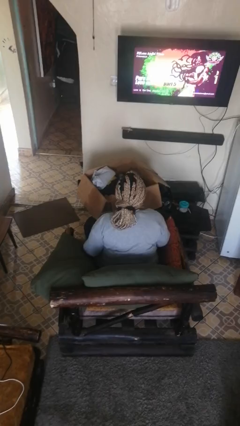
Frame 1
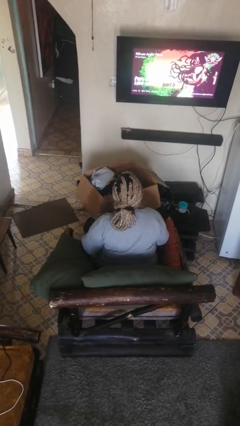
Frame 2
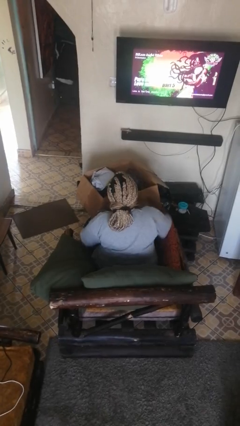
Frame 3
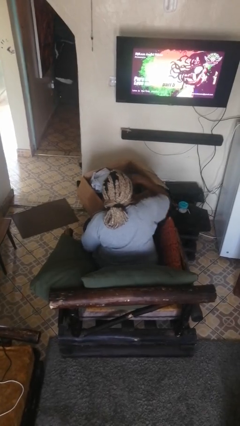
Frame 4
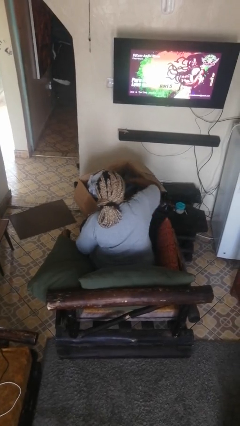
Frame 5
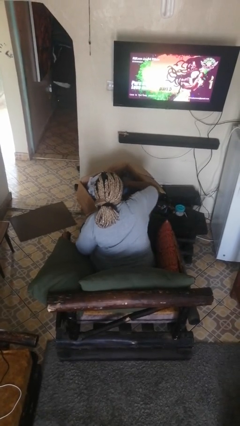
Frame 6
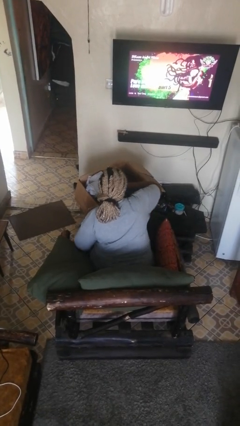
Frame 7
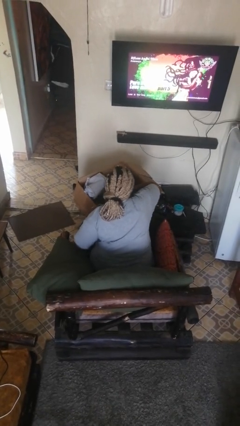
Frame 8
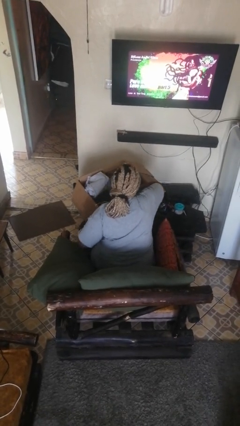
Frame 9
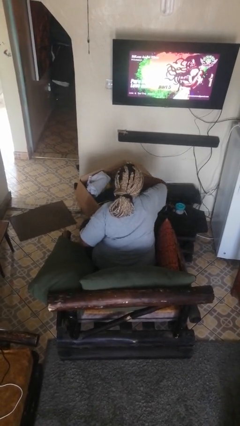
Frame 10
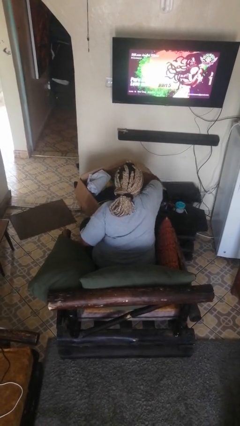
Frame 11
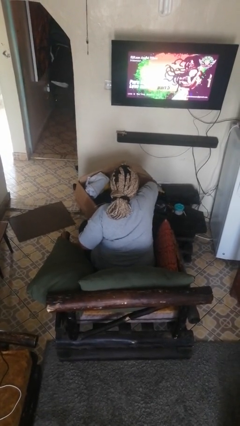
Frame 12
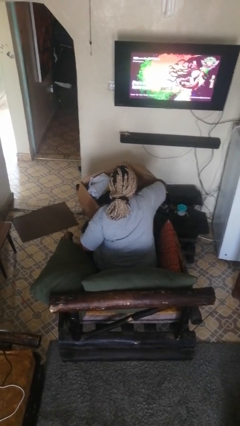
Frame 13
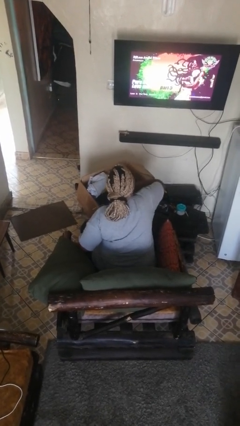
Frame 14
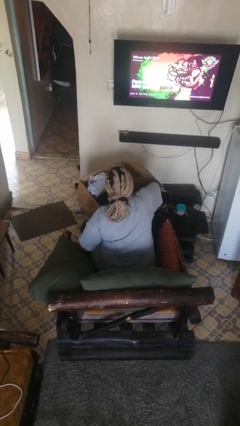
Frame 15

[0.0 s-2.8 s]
person searches in box

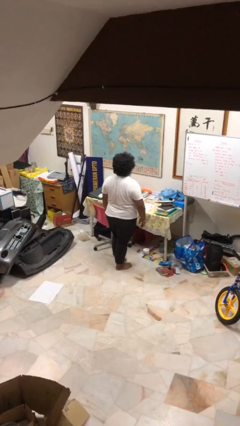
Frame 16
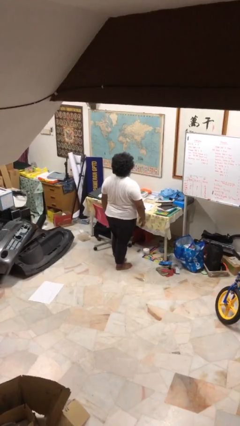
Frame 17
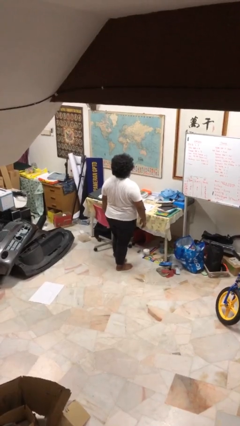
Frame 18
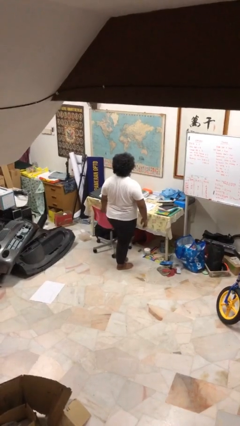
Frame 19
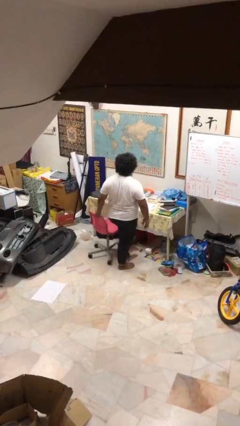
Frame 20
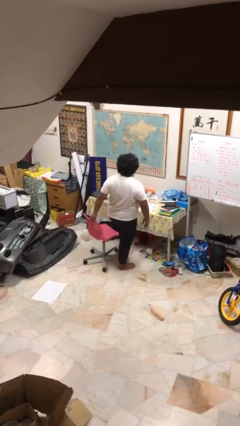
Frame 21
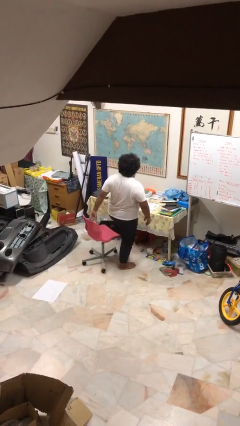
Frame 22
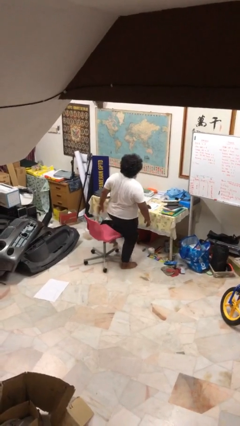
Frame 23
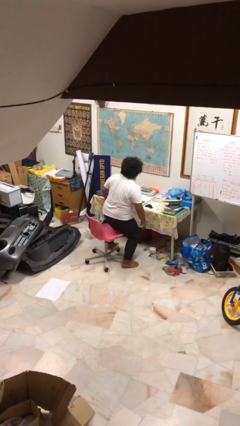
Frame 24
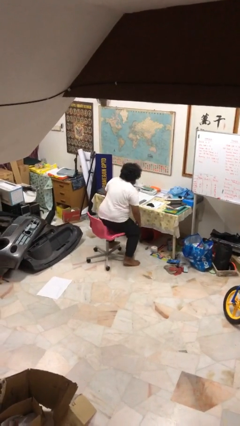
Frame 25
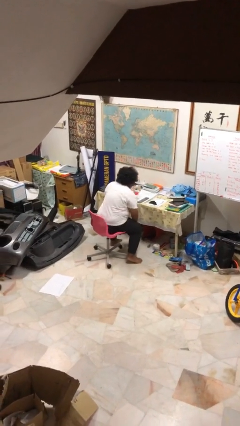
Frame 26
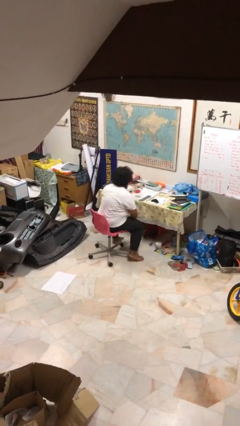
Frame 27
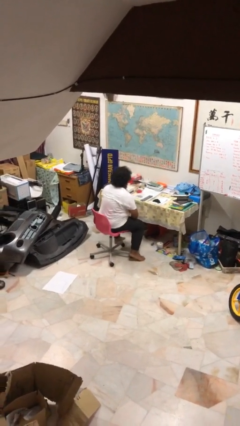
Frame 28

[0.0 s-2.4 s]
person sits down

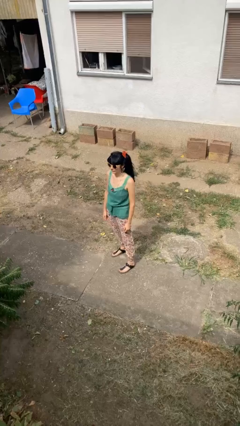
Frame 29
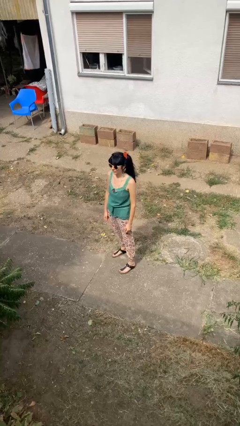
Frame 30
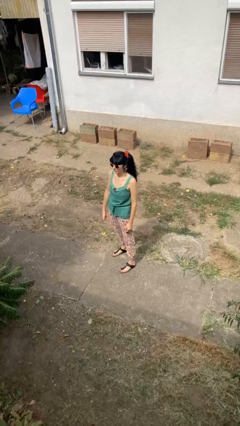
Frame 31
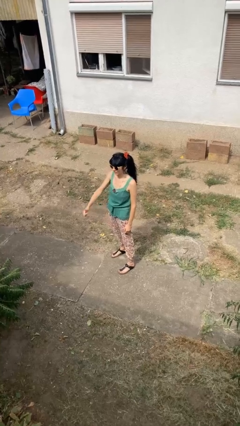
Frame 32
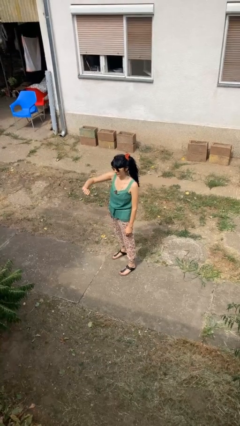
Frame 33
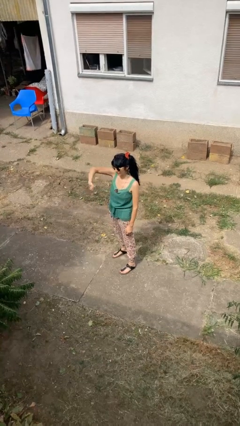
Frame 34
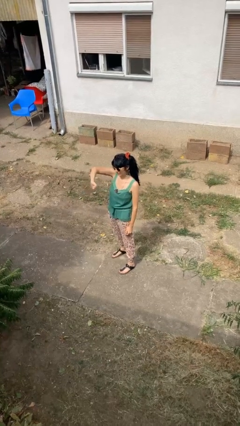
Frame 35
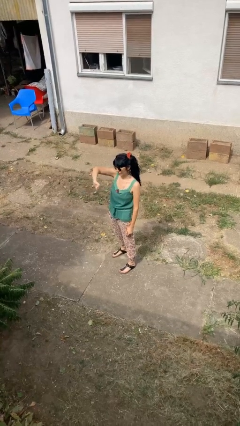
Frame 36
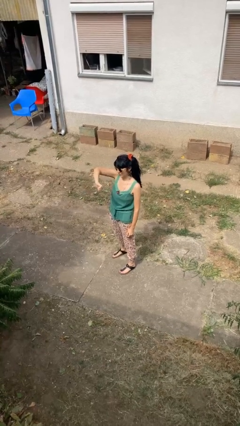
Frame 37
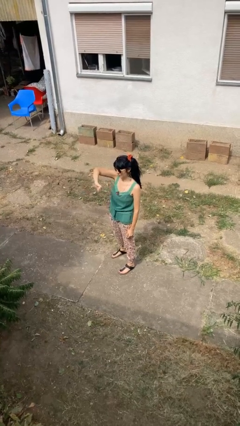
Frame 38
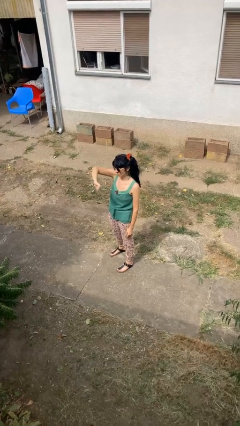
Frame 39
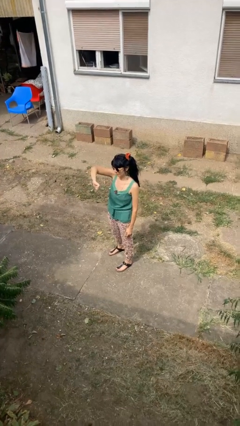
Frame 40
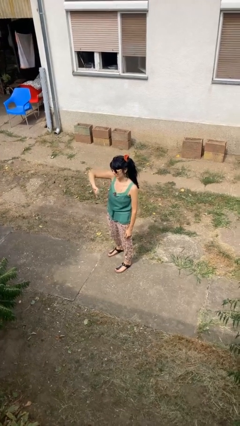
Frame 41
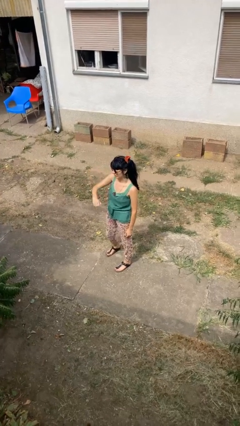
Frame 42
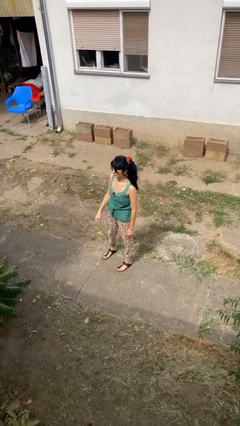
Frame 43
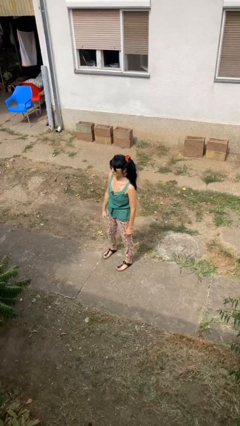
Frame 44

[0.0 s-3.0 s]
person gestures thumbs down

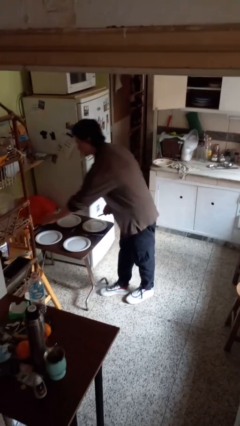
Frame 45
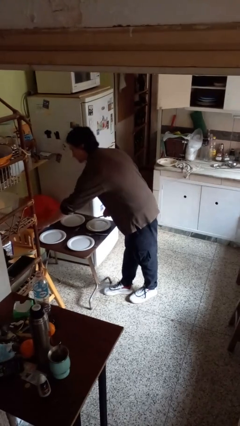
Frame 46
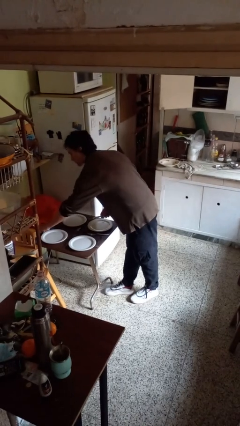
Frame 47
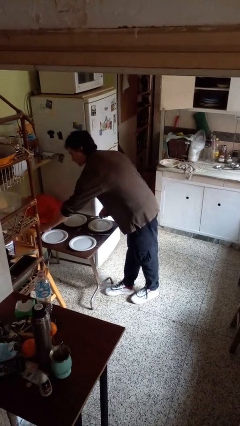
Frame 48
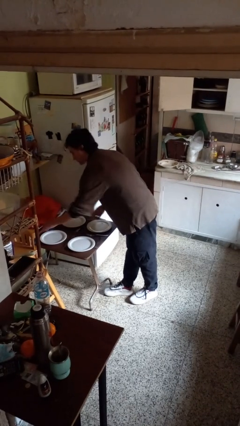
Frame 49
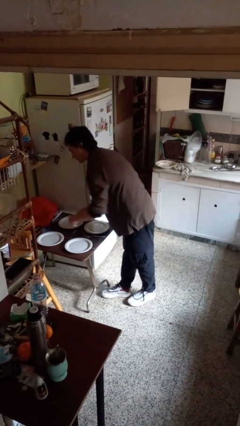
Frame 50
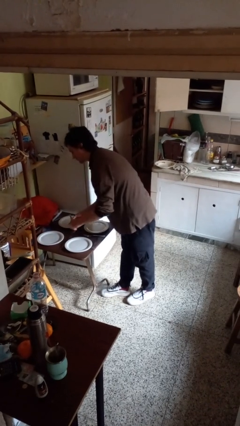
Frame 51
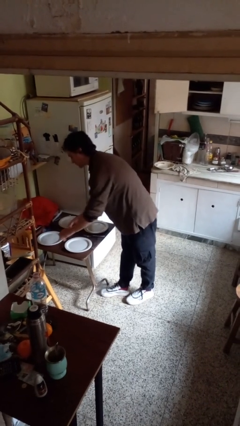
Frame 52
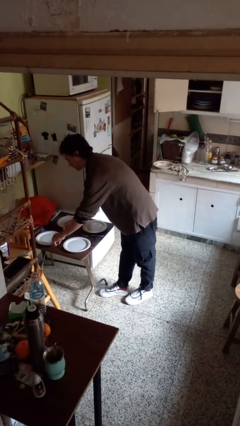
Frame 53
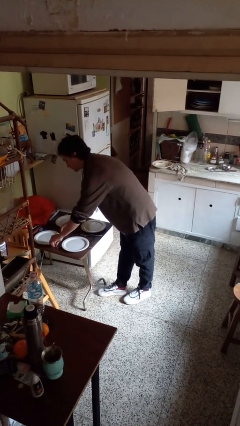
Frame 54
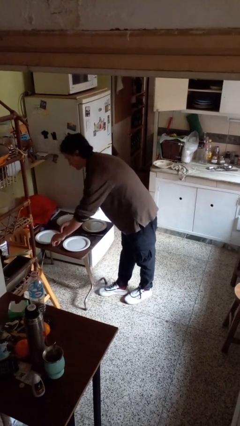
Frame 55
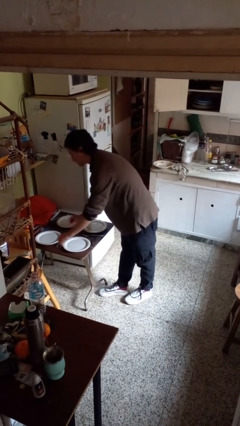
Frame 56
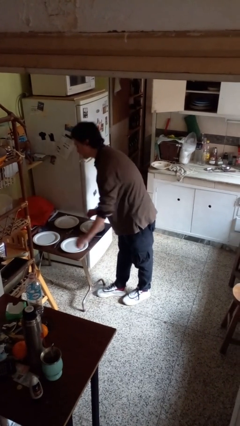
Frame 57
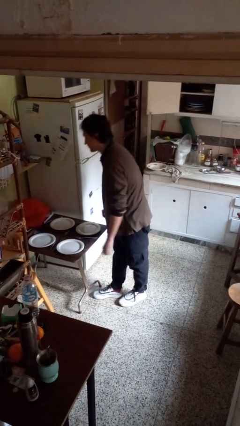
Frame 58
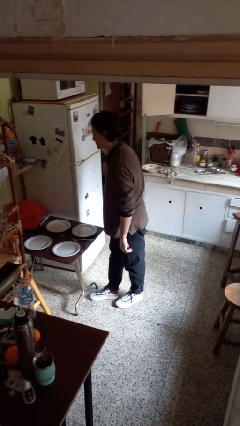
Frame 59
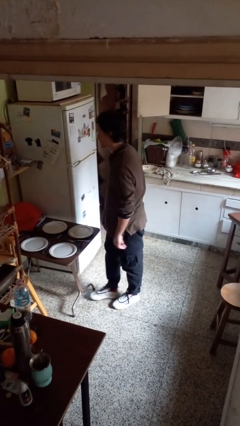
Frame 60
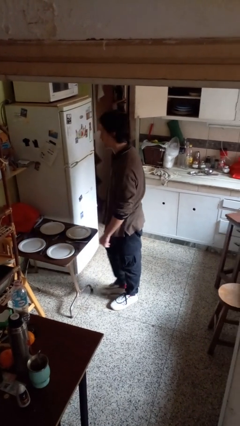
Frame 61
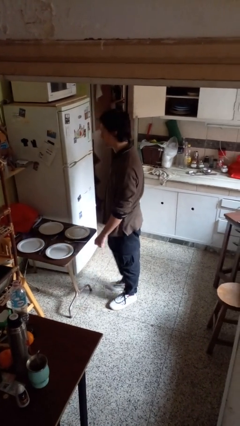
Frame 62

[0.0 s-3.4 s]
person sets table

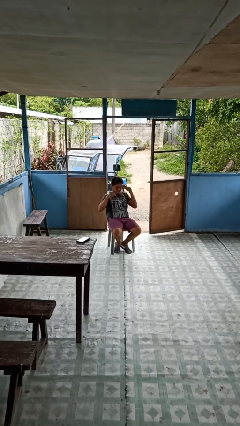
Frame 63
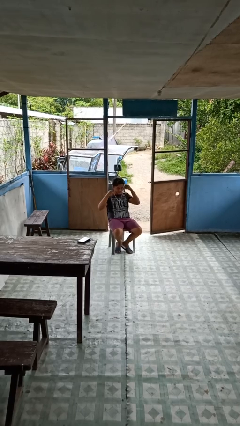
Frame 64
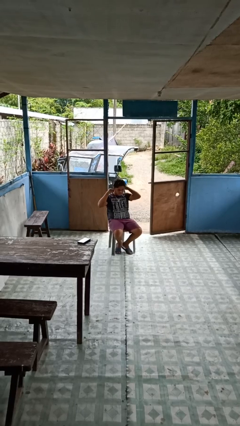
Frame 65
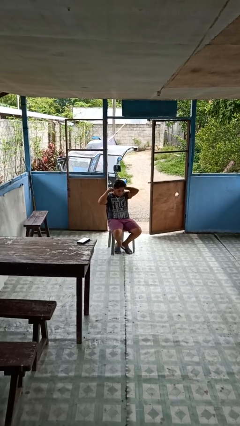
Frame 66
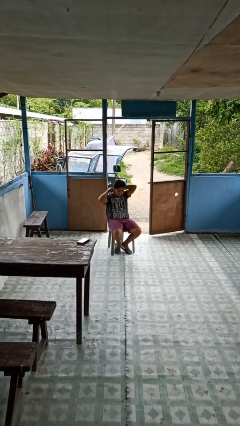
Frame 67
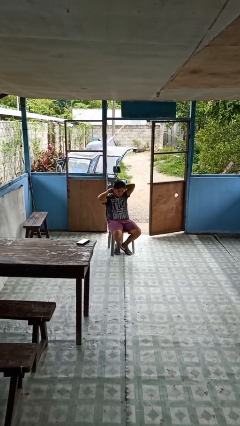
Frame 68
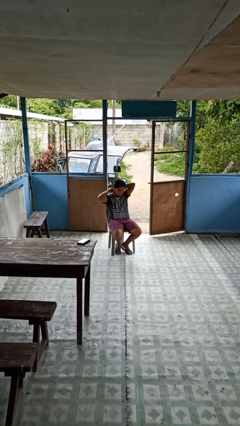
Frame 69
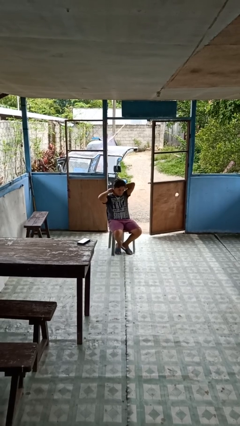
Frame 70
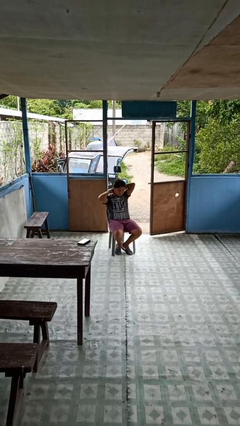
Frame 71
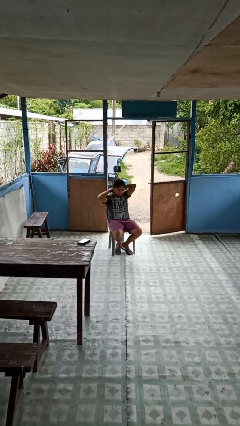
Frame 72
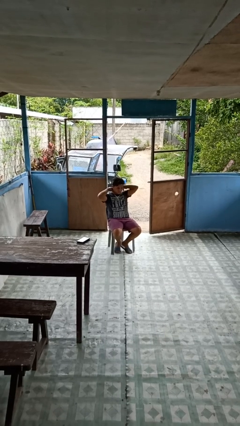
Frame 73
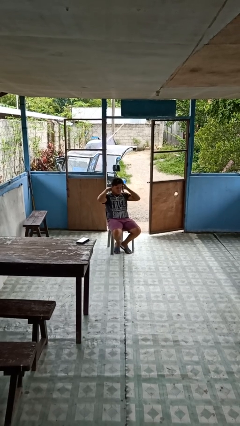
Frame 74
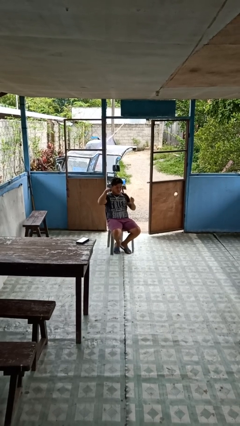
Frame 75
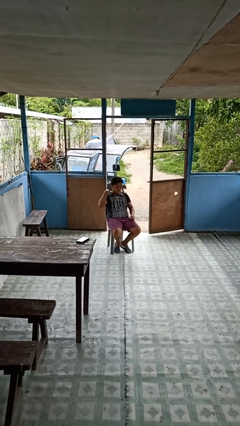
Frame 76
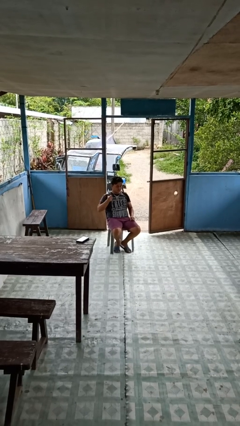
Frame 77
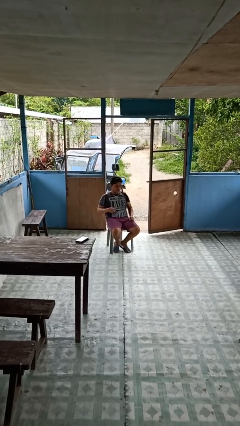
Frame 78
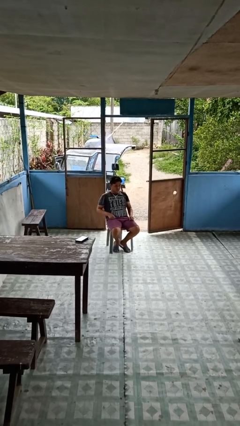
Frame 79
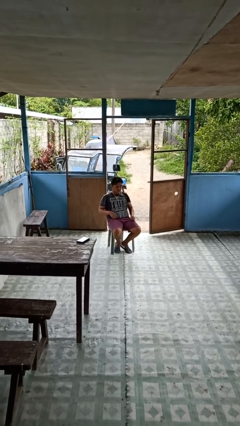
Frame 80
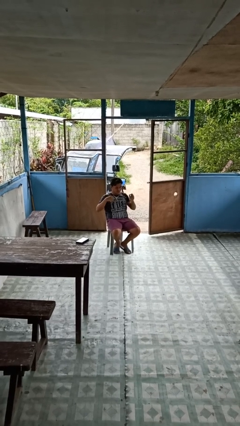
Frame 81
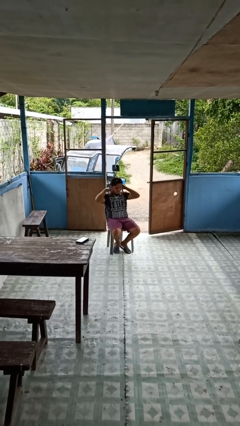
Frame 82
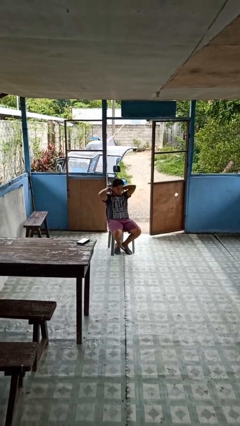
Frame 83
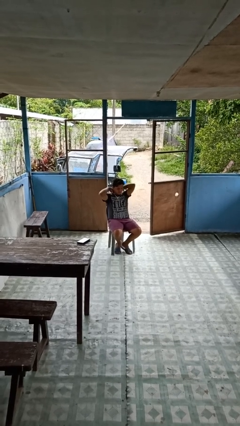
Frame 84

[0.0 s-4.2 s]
person puts on necklace

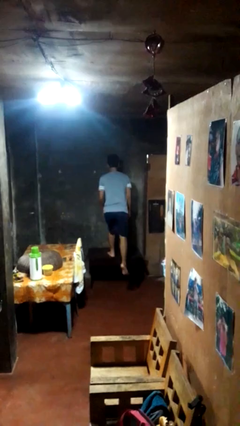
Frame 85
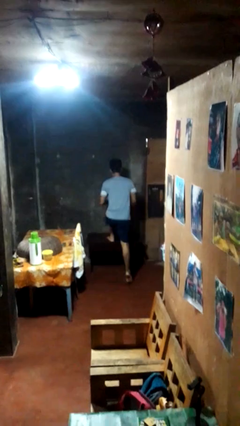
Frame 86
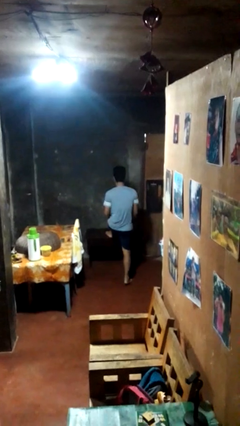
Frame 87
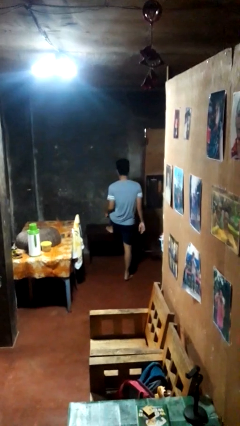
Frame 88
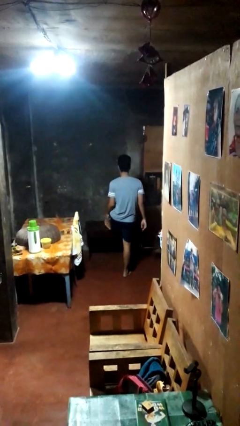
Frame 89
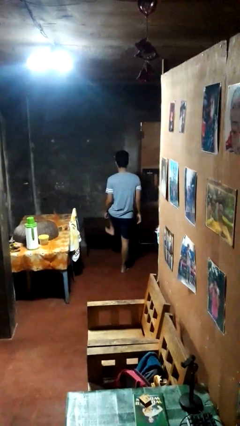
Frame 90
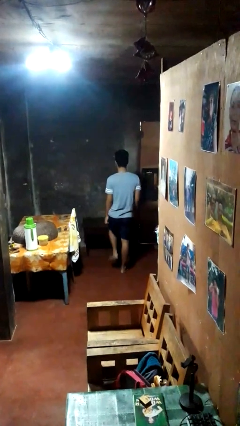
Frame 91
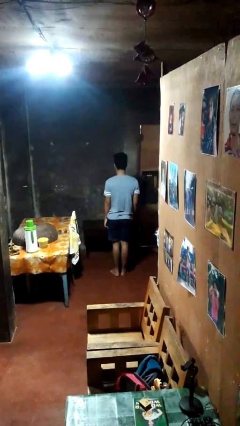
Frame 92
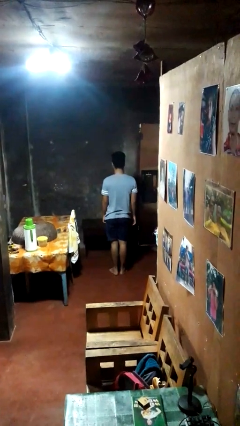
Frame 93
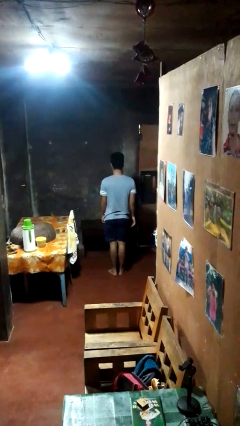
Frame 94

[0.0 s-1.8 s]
person climbs off table
